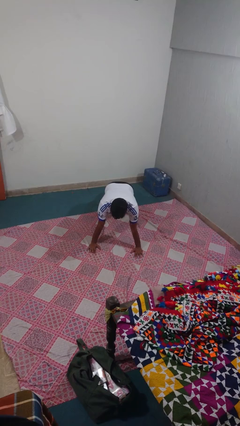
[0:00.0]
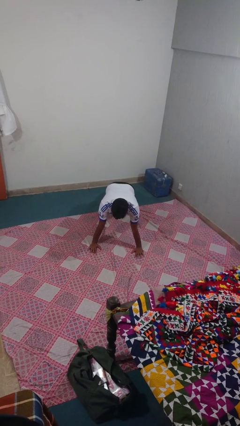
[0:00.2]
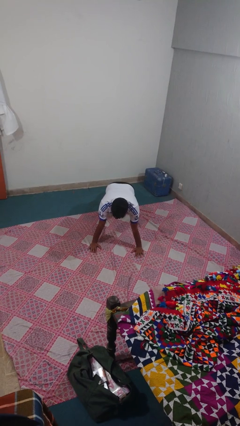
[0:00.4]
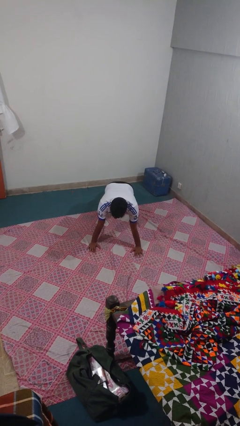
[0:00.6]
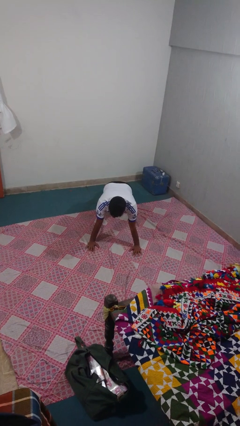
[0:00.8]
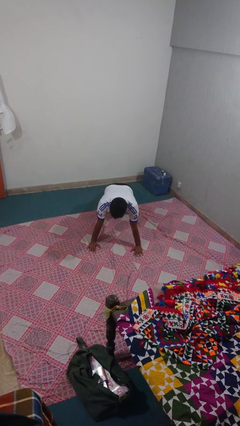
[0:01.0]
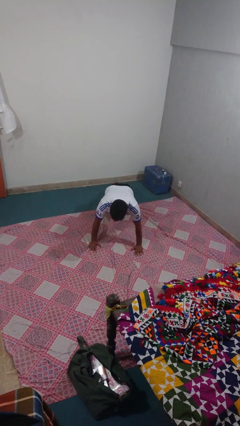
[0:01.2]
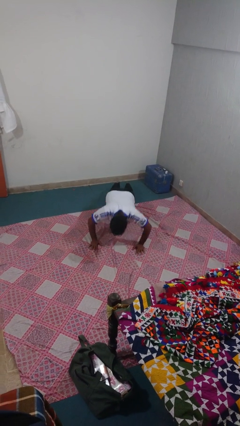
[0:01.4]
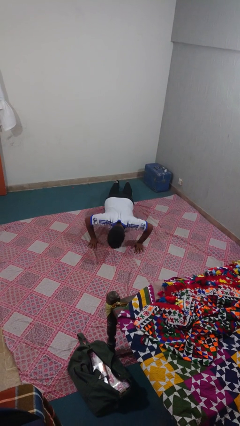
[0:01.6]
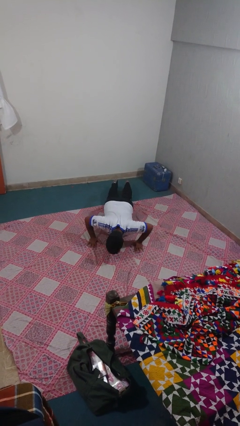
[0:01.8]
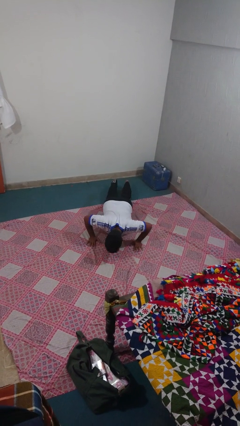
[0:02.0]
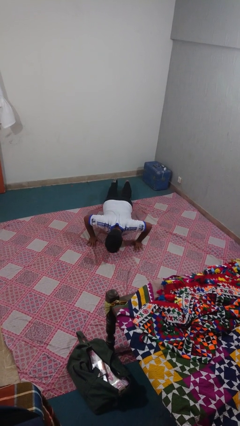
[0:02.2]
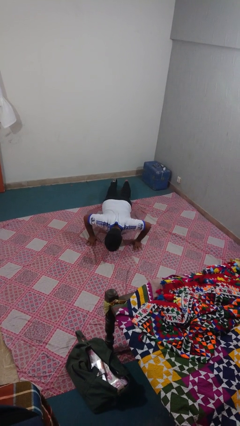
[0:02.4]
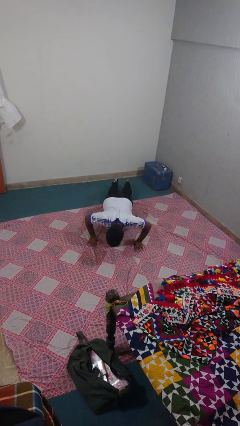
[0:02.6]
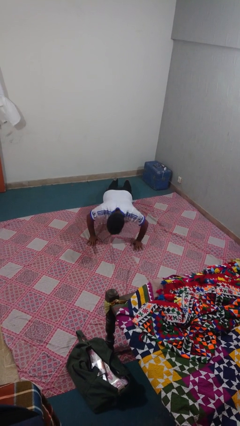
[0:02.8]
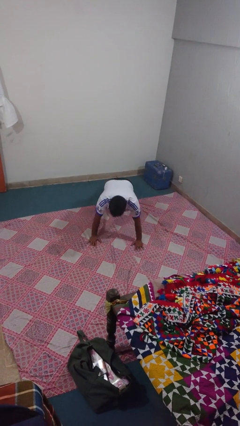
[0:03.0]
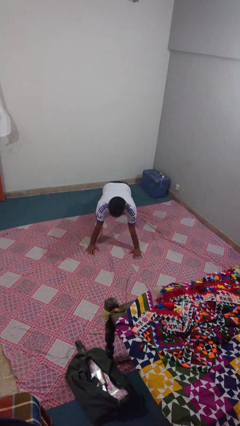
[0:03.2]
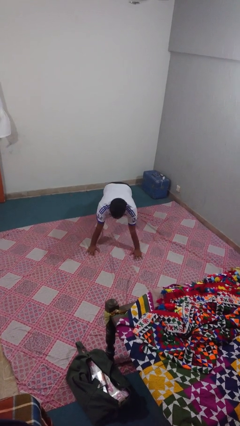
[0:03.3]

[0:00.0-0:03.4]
person exercises with pushup

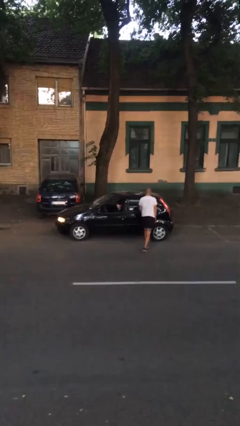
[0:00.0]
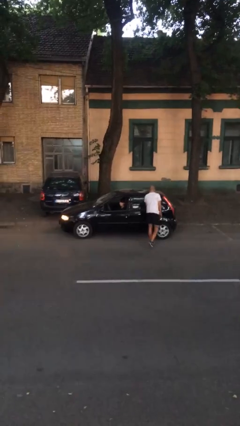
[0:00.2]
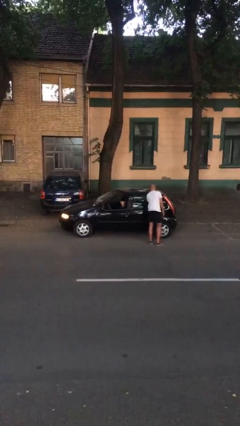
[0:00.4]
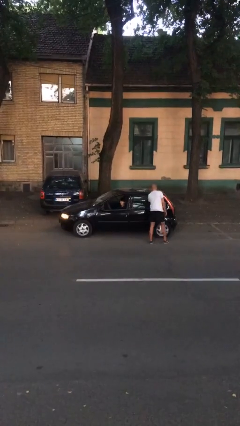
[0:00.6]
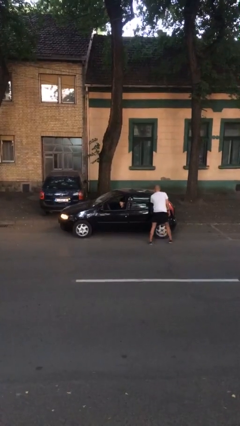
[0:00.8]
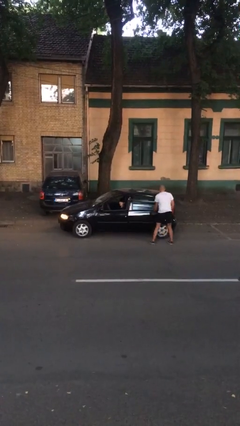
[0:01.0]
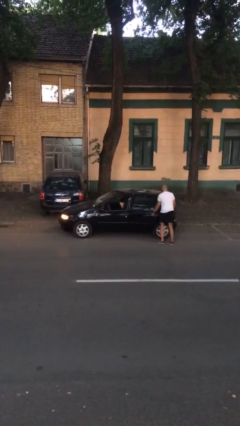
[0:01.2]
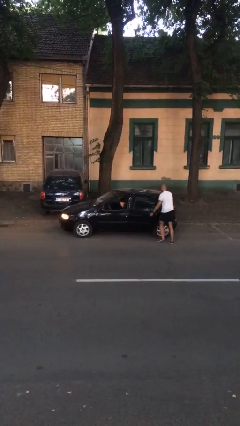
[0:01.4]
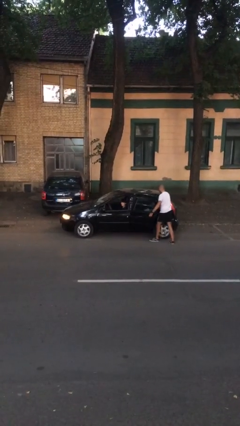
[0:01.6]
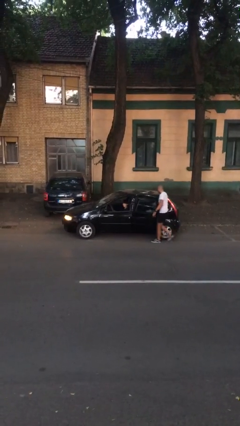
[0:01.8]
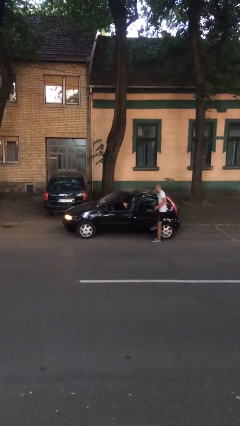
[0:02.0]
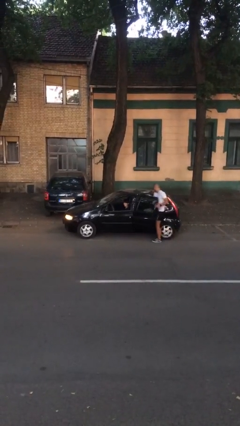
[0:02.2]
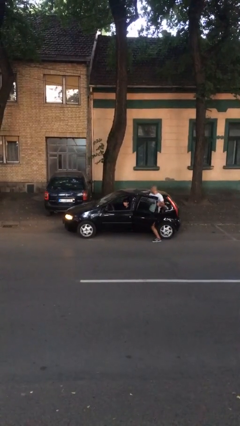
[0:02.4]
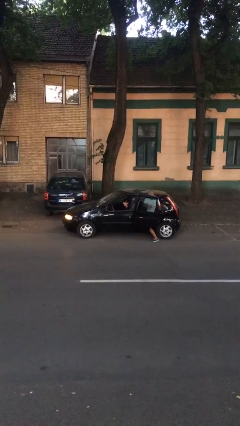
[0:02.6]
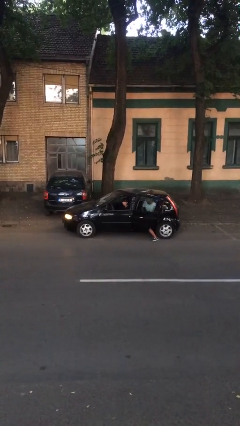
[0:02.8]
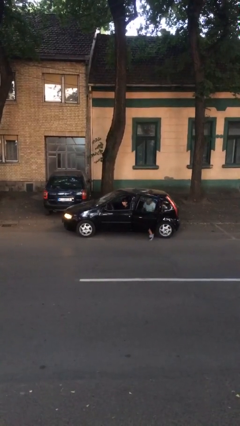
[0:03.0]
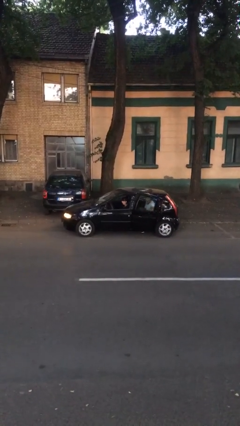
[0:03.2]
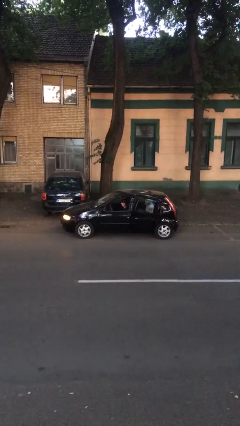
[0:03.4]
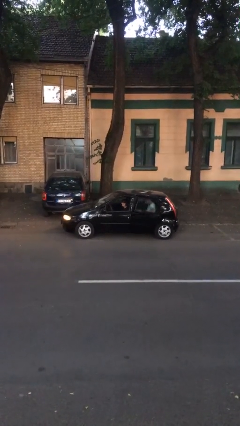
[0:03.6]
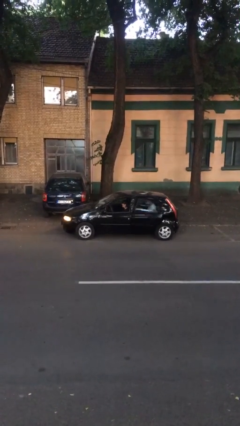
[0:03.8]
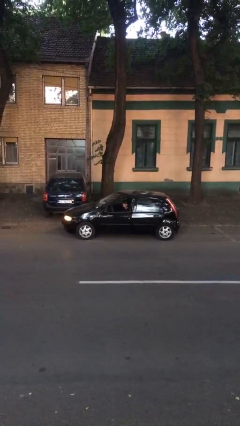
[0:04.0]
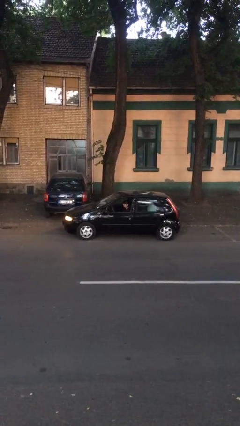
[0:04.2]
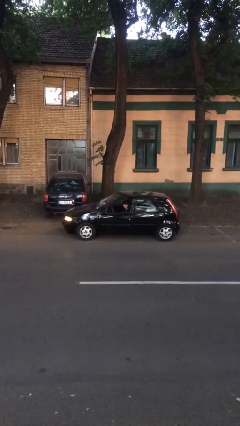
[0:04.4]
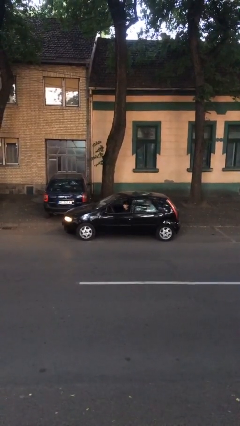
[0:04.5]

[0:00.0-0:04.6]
car picks up person

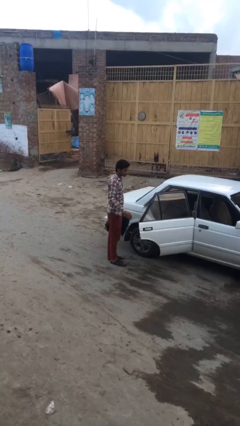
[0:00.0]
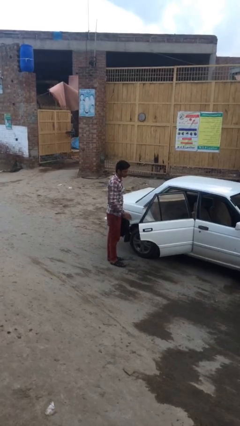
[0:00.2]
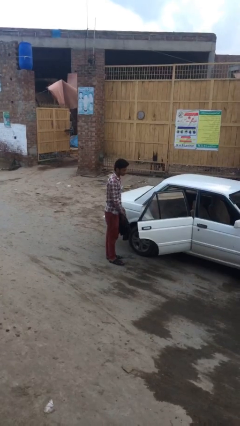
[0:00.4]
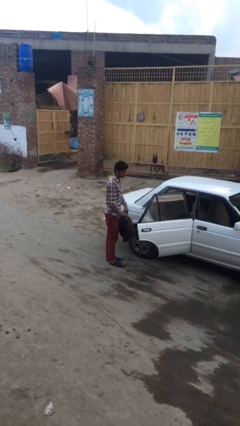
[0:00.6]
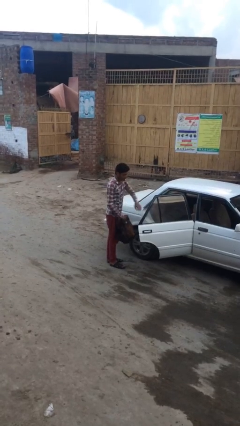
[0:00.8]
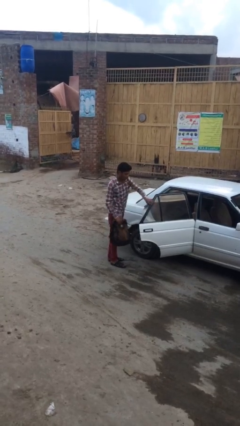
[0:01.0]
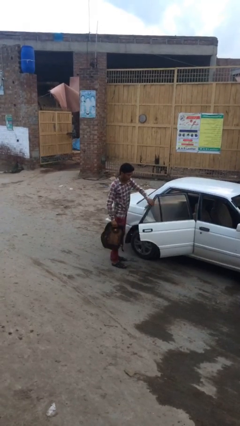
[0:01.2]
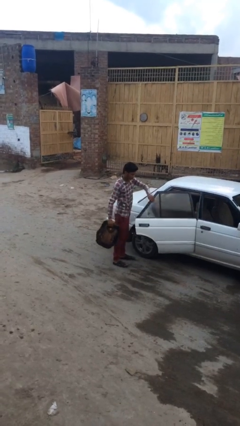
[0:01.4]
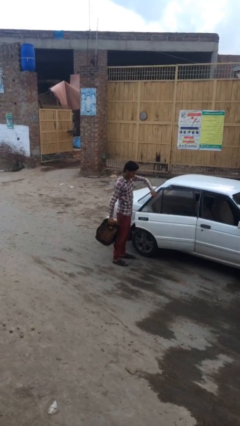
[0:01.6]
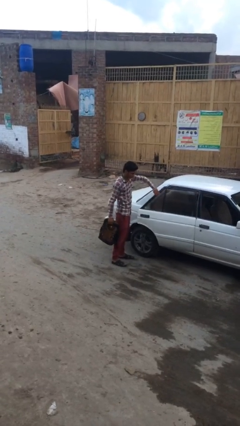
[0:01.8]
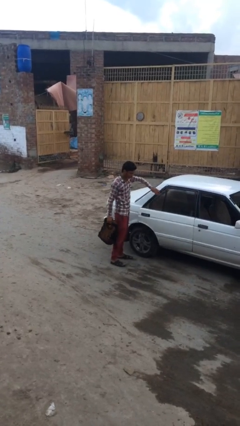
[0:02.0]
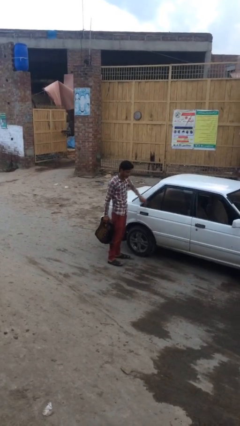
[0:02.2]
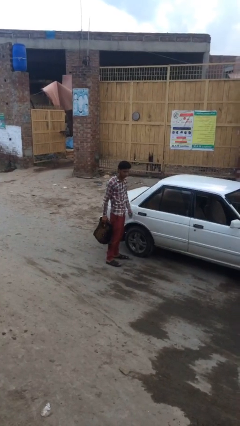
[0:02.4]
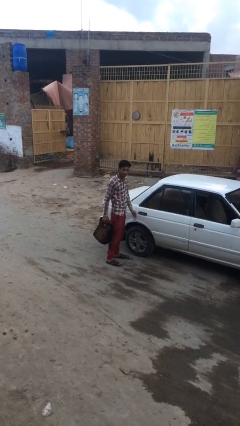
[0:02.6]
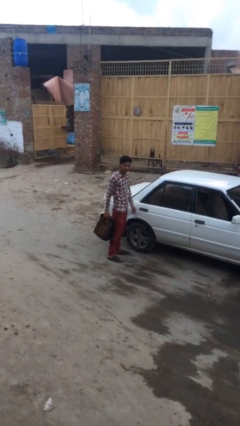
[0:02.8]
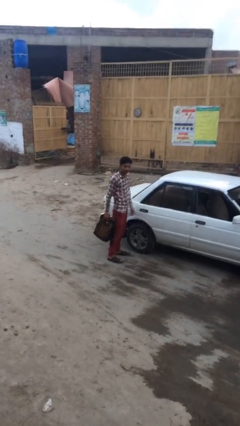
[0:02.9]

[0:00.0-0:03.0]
person closes car door

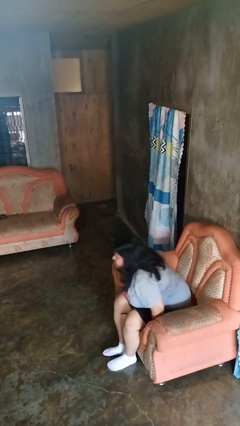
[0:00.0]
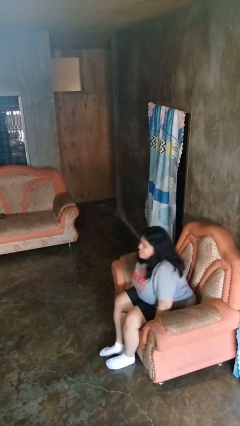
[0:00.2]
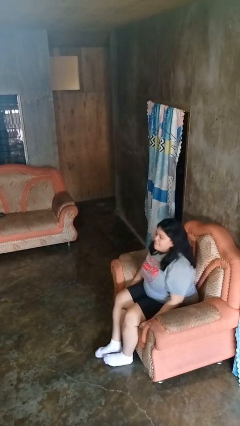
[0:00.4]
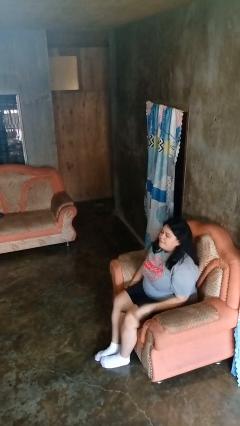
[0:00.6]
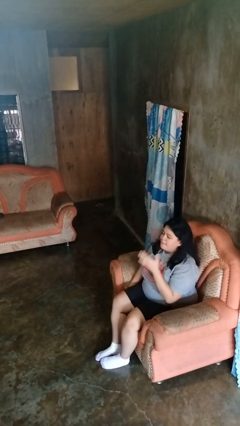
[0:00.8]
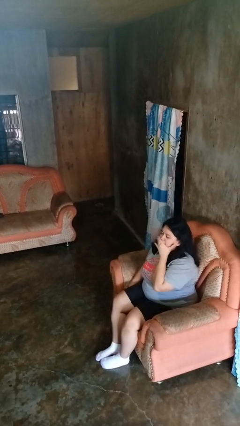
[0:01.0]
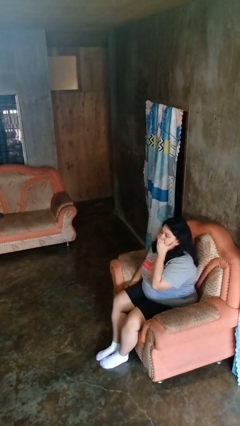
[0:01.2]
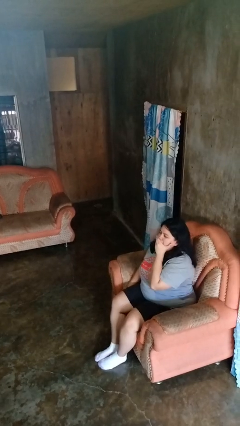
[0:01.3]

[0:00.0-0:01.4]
person yawns

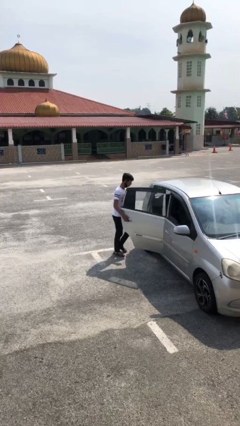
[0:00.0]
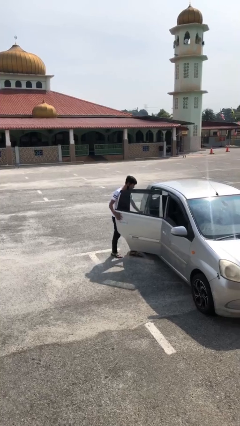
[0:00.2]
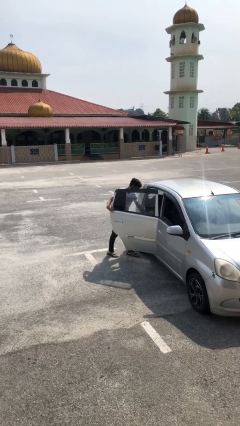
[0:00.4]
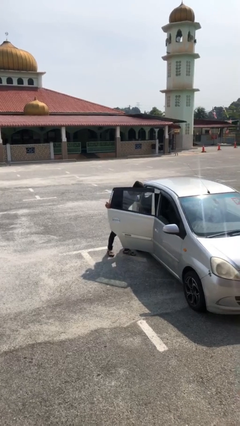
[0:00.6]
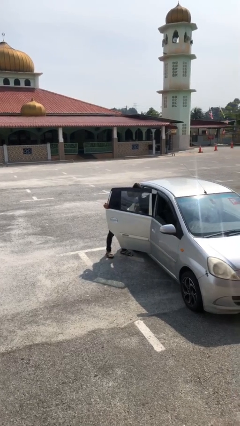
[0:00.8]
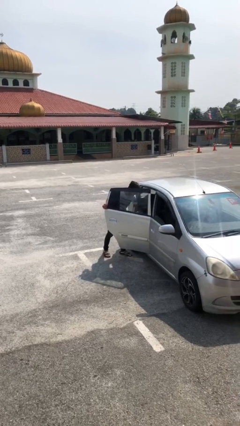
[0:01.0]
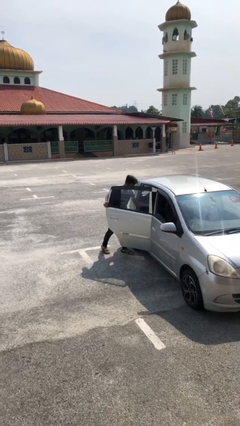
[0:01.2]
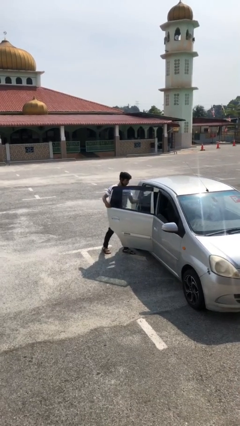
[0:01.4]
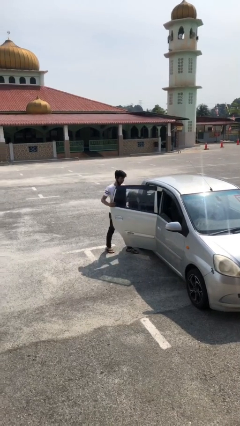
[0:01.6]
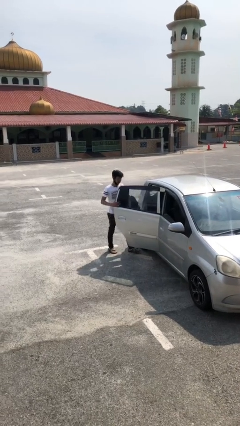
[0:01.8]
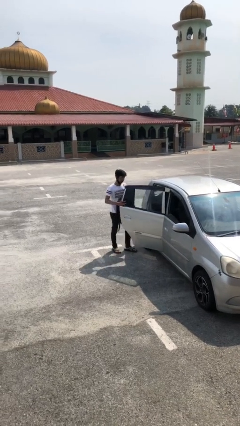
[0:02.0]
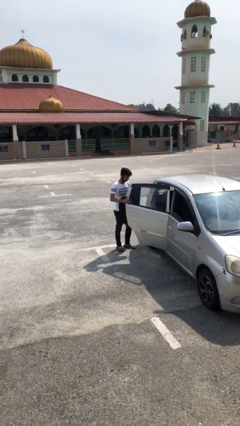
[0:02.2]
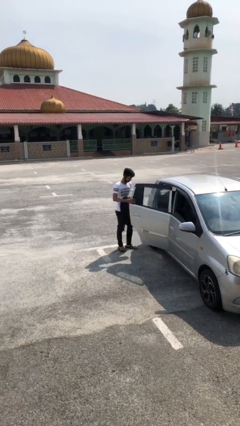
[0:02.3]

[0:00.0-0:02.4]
person unloads car

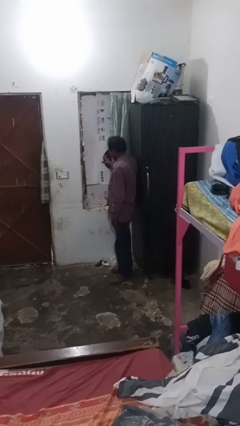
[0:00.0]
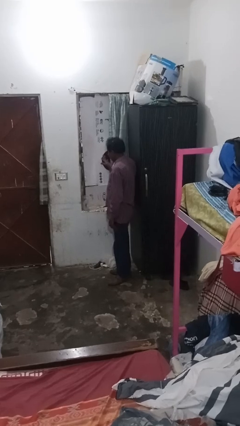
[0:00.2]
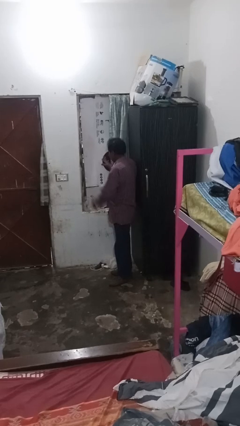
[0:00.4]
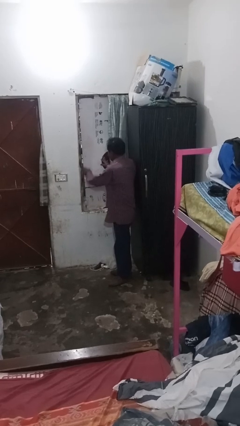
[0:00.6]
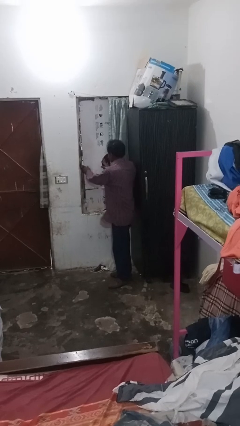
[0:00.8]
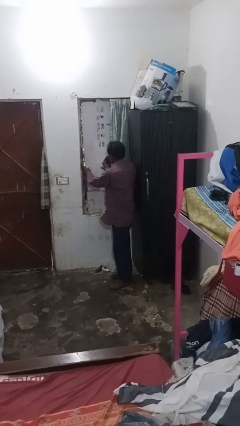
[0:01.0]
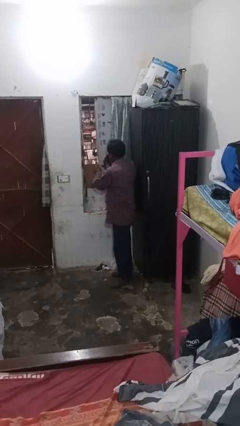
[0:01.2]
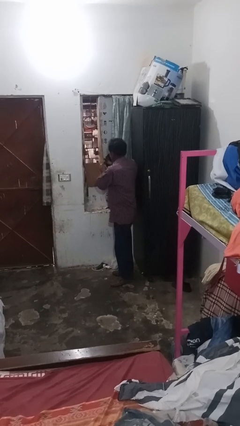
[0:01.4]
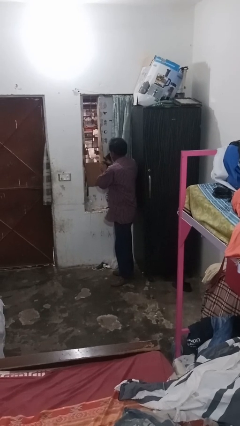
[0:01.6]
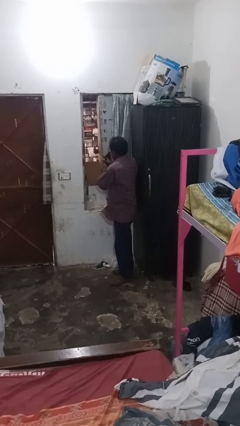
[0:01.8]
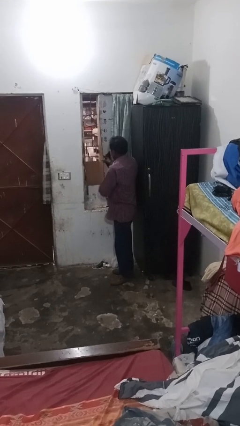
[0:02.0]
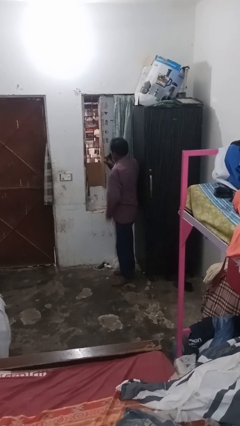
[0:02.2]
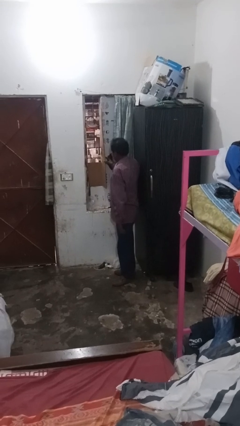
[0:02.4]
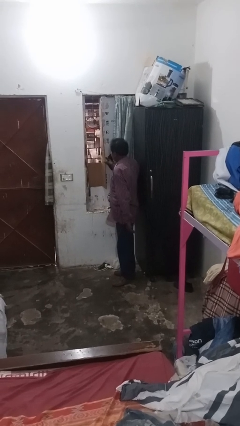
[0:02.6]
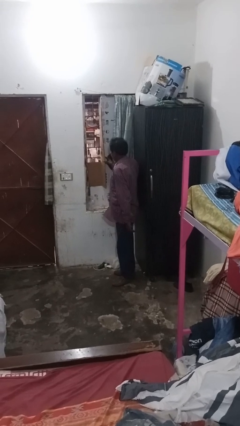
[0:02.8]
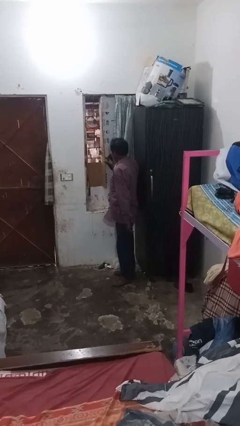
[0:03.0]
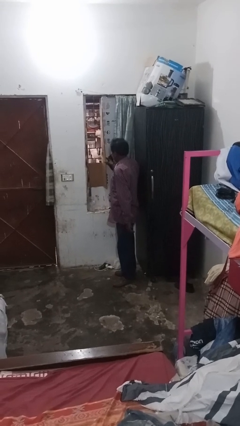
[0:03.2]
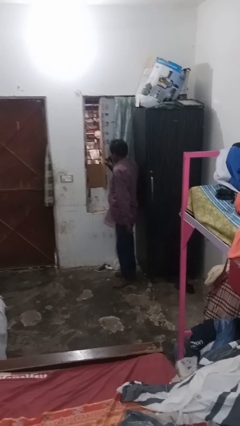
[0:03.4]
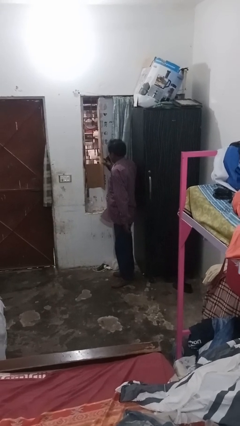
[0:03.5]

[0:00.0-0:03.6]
person opens home window
